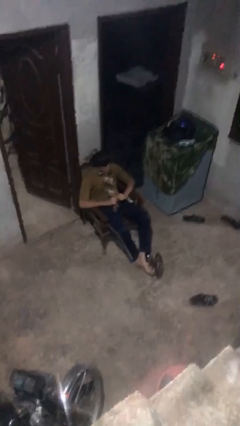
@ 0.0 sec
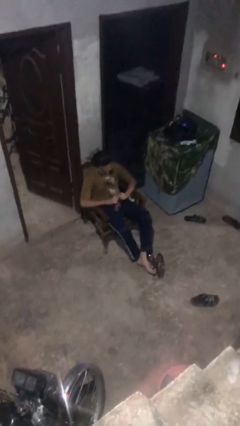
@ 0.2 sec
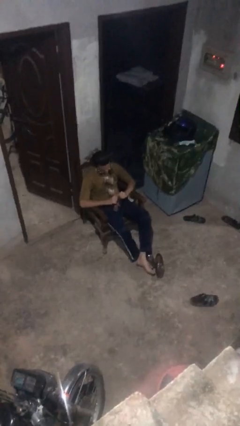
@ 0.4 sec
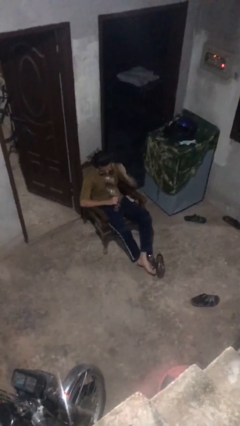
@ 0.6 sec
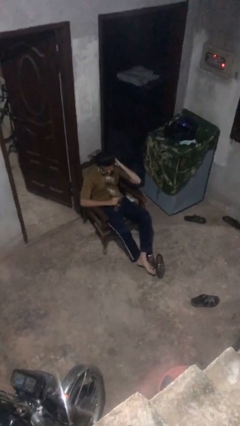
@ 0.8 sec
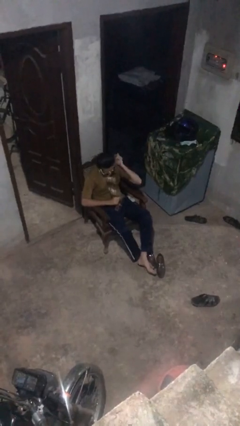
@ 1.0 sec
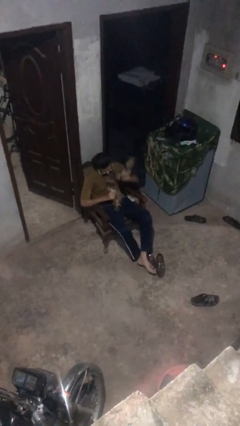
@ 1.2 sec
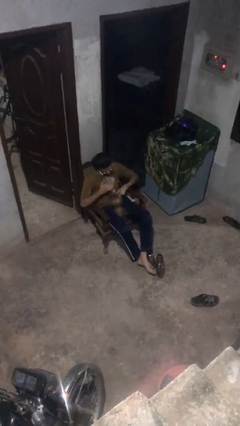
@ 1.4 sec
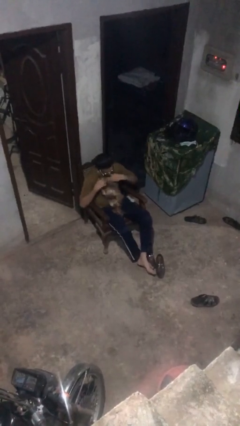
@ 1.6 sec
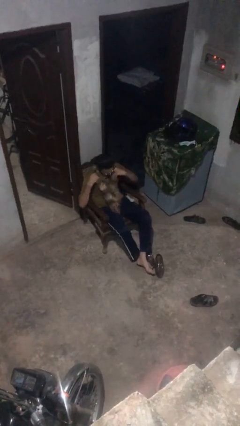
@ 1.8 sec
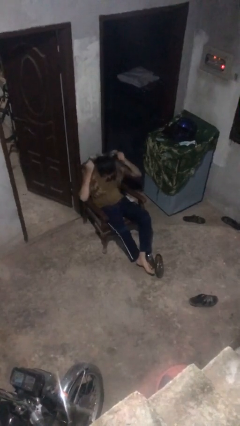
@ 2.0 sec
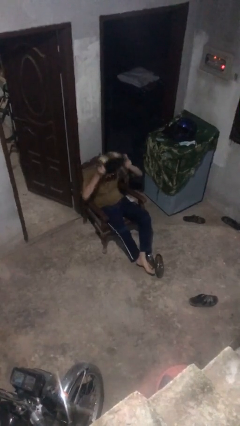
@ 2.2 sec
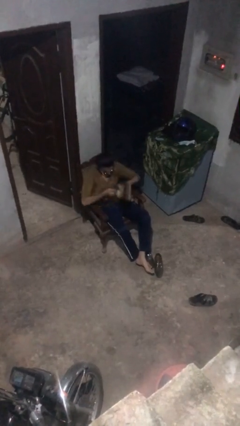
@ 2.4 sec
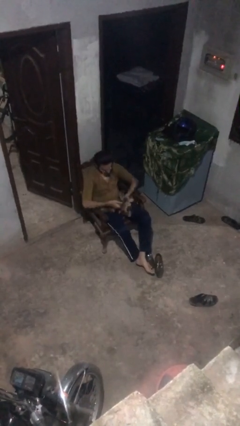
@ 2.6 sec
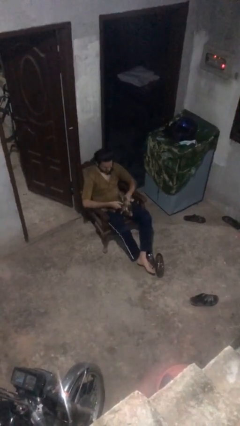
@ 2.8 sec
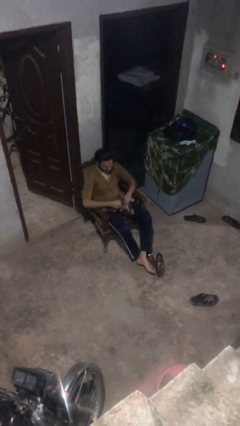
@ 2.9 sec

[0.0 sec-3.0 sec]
person takes off scarf

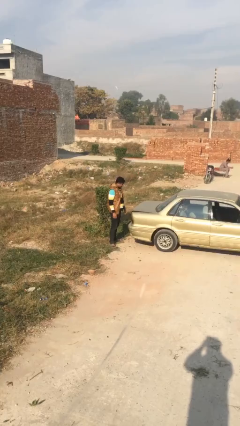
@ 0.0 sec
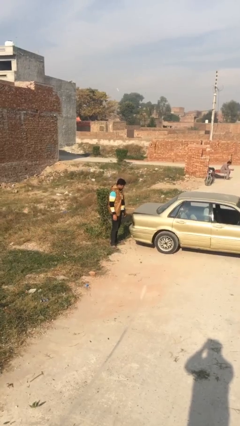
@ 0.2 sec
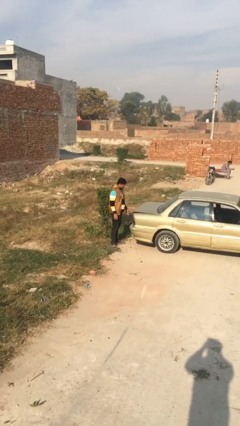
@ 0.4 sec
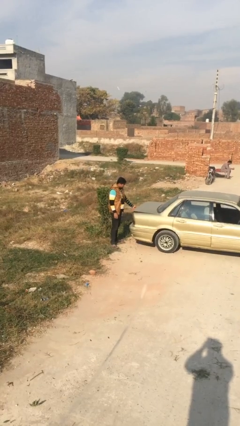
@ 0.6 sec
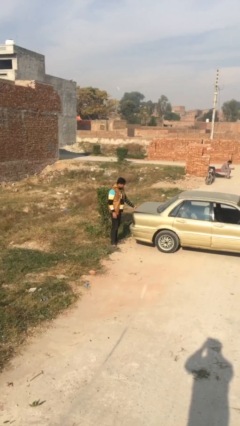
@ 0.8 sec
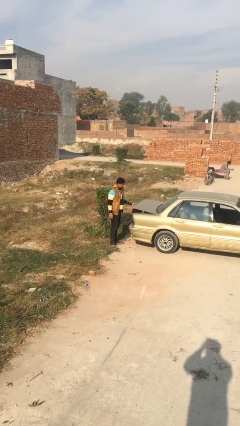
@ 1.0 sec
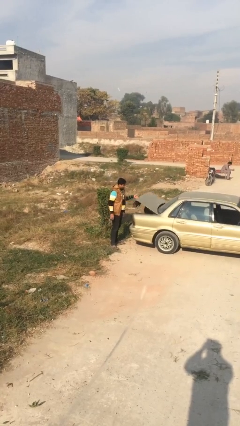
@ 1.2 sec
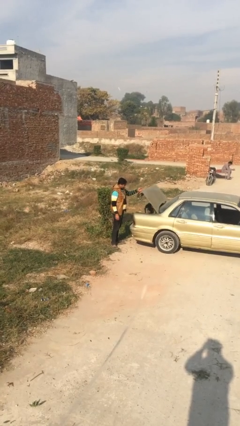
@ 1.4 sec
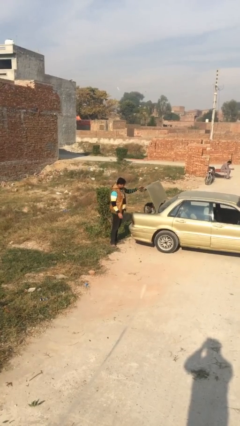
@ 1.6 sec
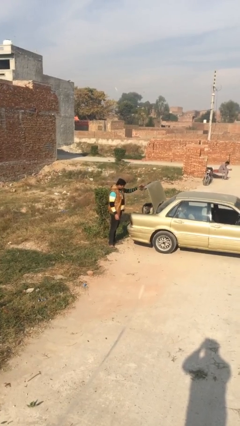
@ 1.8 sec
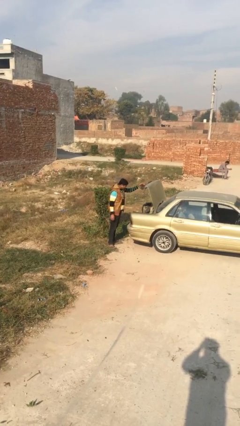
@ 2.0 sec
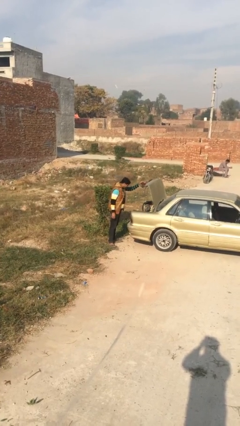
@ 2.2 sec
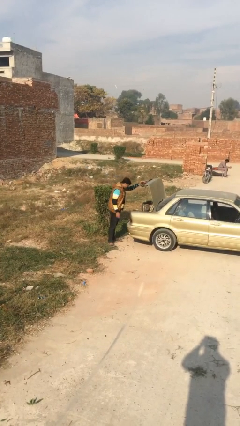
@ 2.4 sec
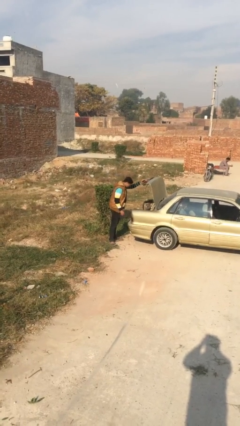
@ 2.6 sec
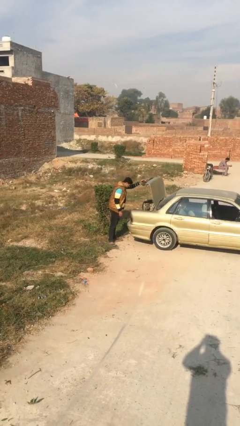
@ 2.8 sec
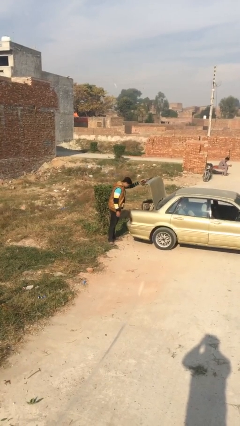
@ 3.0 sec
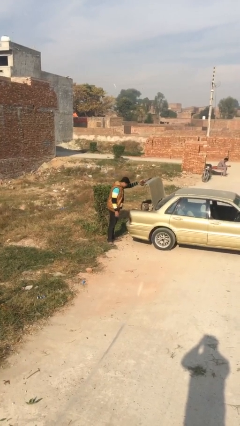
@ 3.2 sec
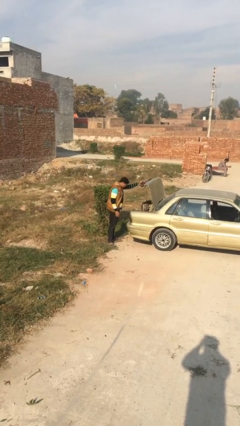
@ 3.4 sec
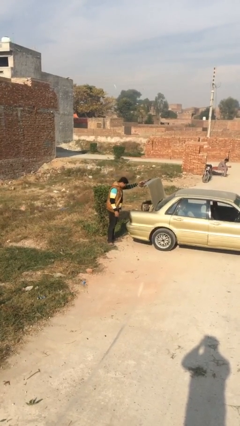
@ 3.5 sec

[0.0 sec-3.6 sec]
person opens car trunk

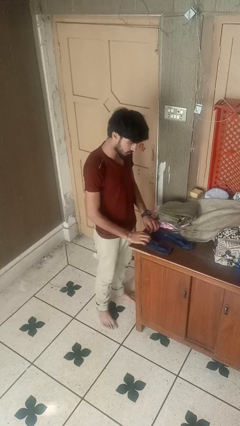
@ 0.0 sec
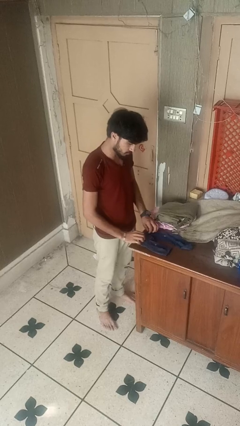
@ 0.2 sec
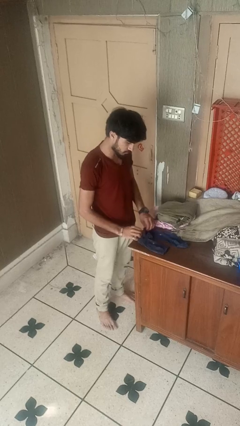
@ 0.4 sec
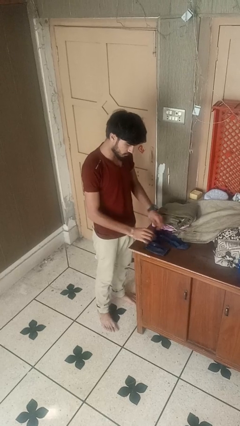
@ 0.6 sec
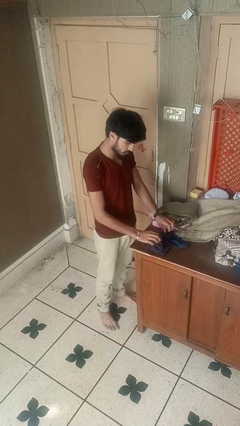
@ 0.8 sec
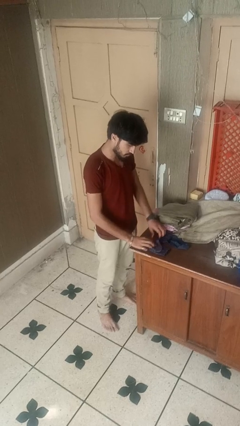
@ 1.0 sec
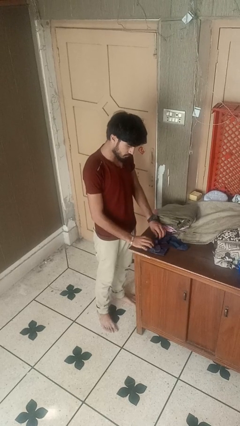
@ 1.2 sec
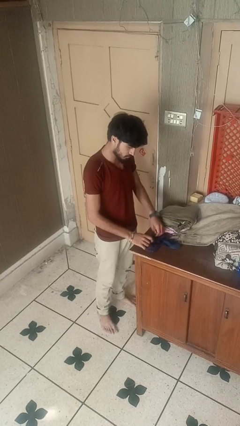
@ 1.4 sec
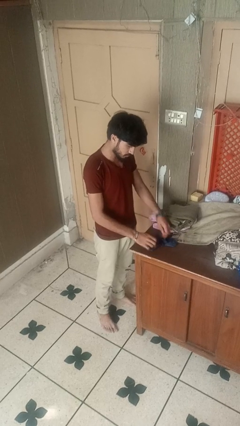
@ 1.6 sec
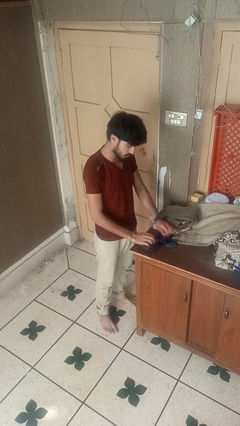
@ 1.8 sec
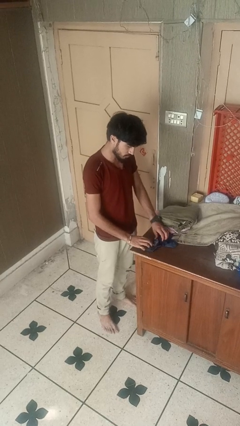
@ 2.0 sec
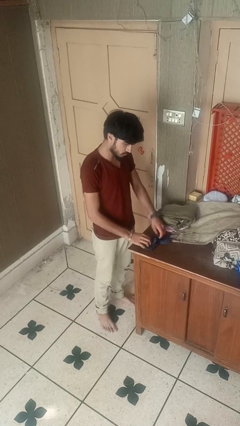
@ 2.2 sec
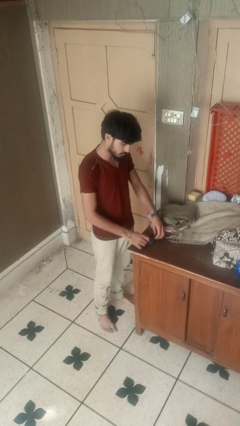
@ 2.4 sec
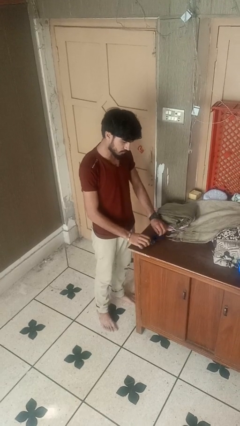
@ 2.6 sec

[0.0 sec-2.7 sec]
person folds socks

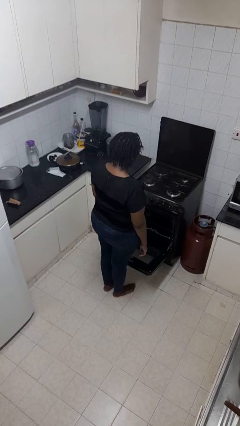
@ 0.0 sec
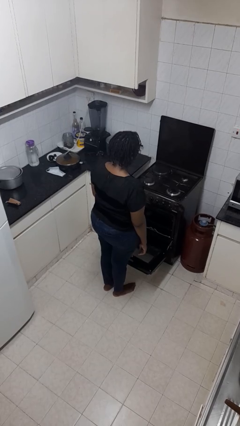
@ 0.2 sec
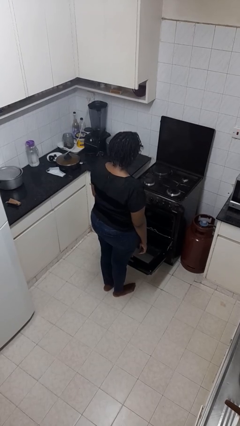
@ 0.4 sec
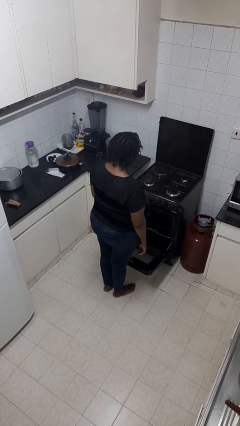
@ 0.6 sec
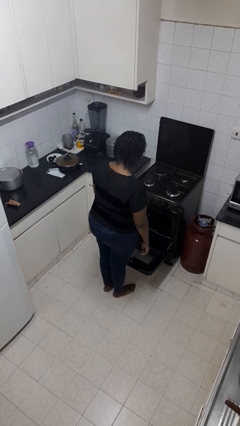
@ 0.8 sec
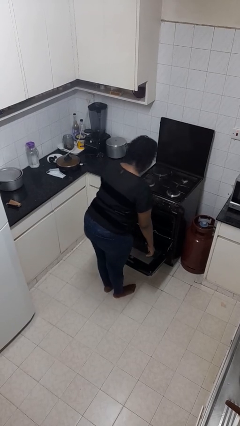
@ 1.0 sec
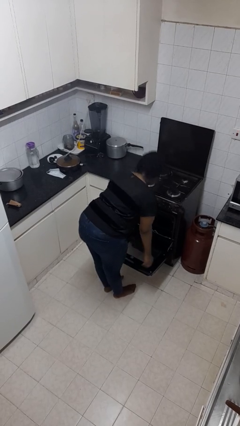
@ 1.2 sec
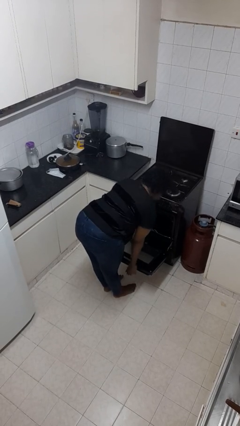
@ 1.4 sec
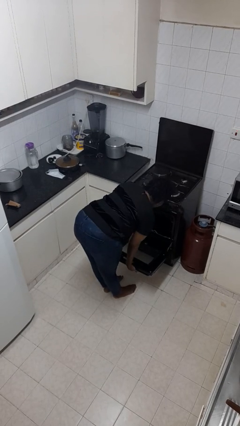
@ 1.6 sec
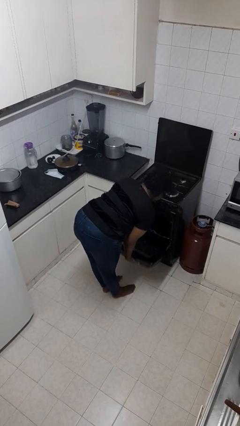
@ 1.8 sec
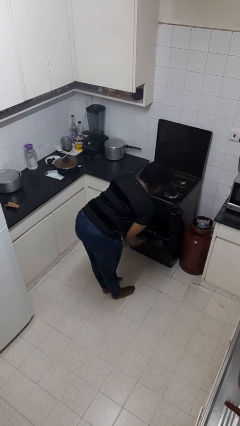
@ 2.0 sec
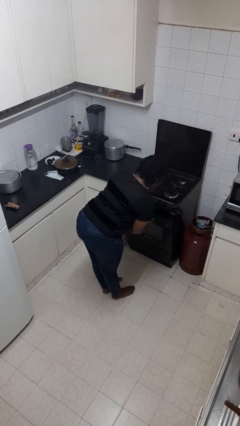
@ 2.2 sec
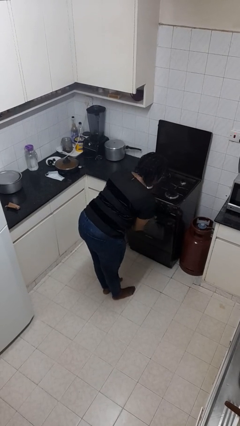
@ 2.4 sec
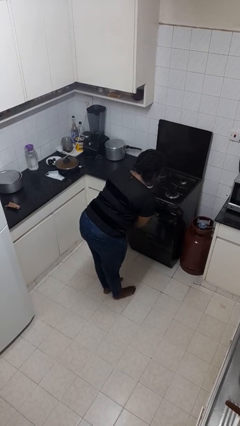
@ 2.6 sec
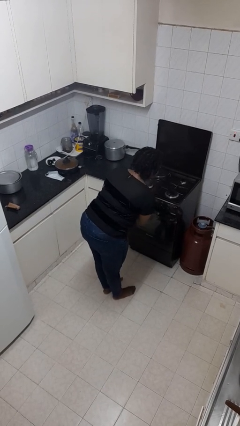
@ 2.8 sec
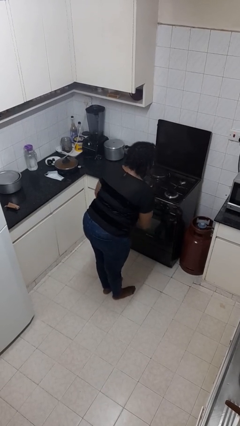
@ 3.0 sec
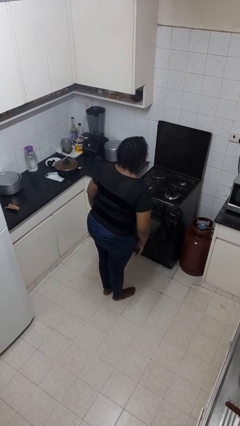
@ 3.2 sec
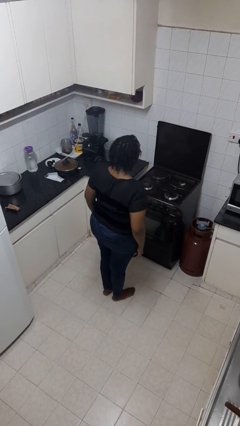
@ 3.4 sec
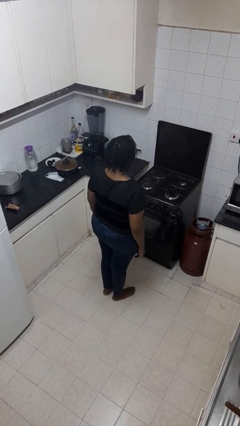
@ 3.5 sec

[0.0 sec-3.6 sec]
person closes oven door

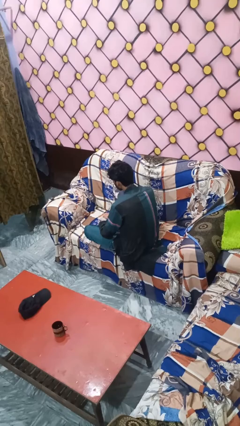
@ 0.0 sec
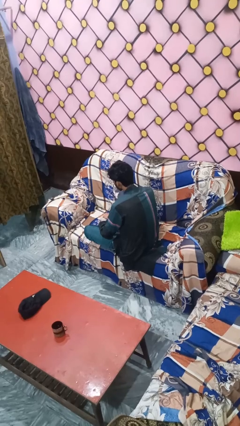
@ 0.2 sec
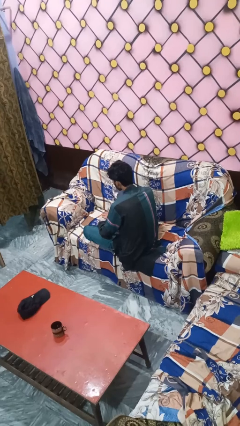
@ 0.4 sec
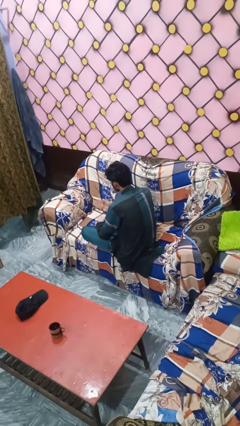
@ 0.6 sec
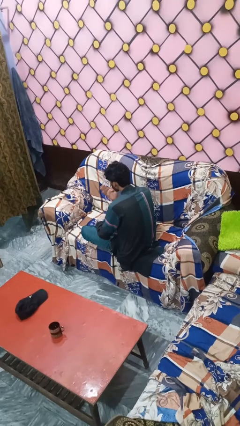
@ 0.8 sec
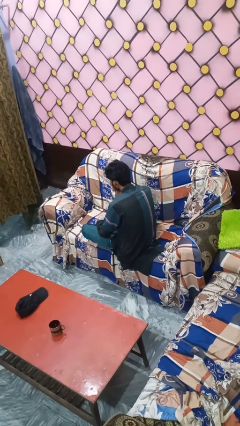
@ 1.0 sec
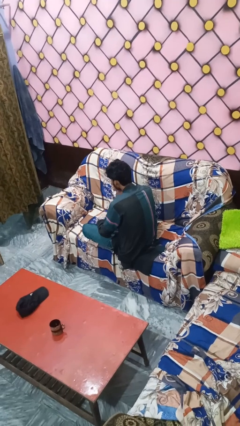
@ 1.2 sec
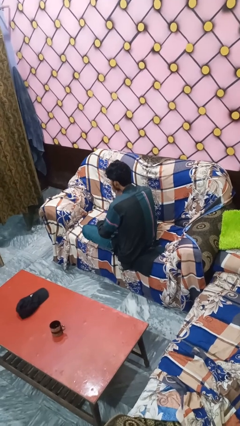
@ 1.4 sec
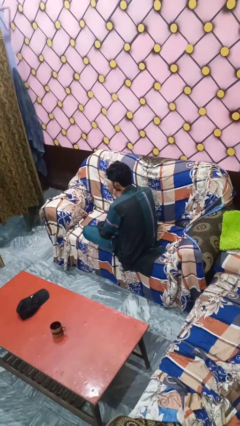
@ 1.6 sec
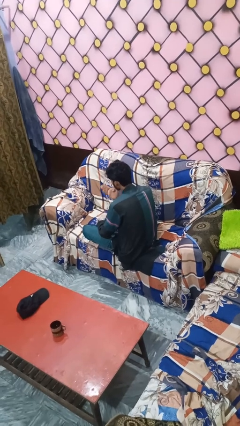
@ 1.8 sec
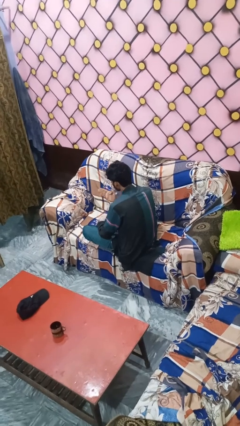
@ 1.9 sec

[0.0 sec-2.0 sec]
person gestures blow kiss

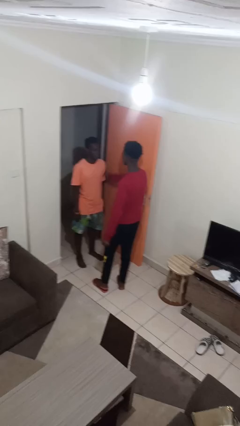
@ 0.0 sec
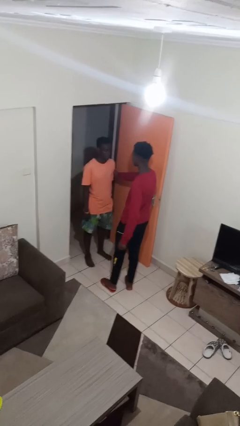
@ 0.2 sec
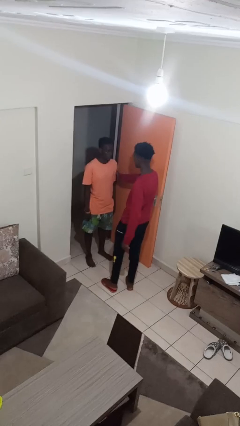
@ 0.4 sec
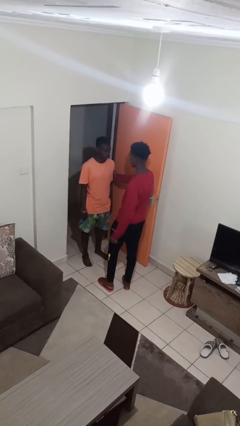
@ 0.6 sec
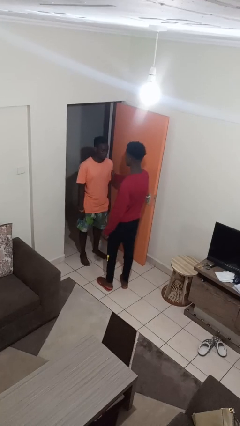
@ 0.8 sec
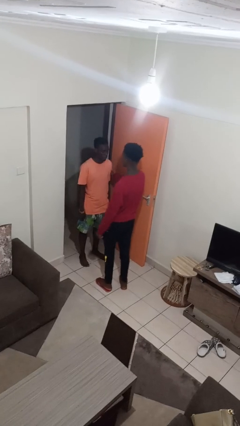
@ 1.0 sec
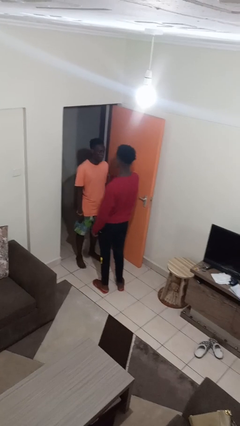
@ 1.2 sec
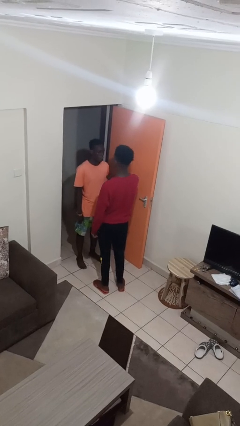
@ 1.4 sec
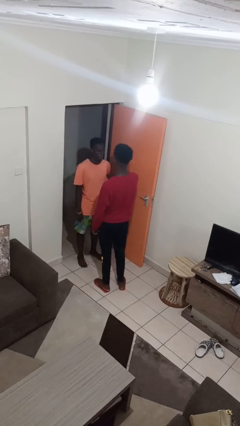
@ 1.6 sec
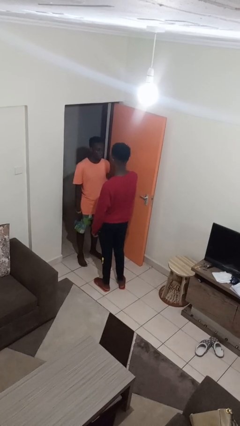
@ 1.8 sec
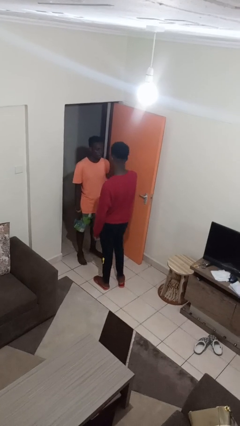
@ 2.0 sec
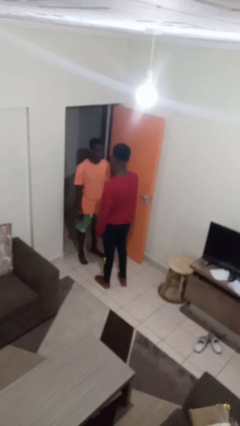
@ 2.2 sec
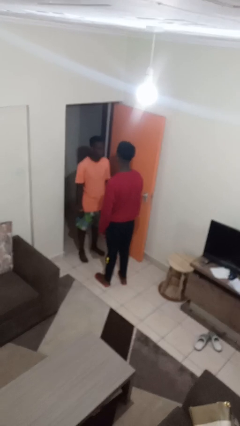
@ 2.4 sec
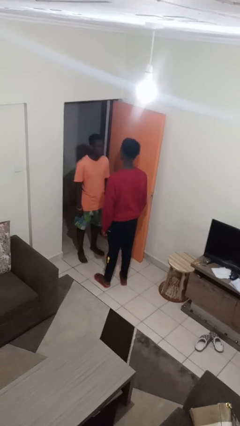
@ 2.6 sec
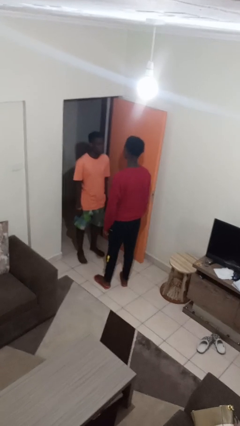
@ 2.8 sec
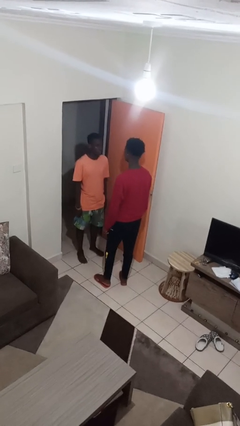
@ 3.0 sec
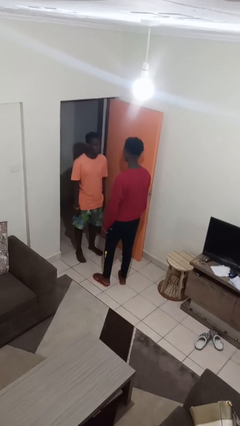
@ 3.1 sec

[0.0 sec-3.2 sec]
person grabs person by bicep
